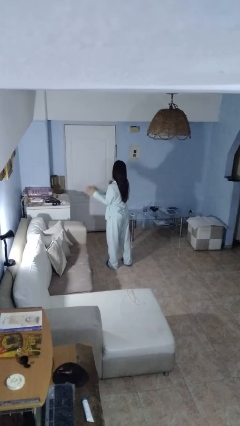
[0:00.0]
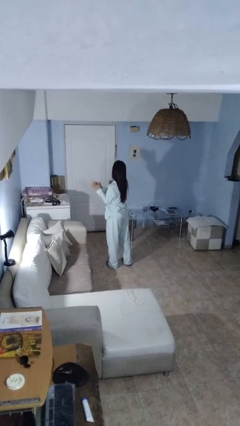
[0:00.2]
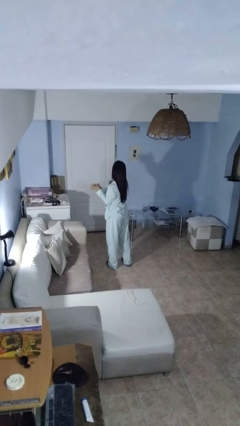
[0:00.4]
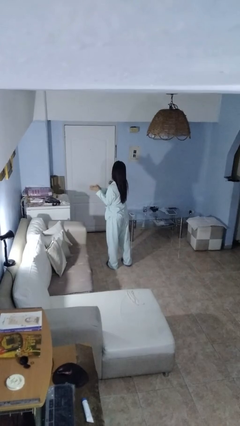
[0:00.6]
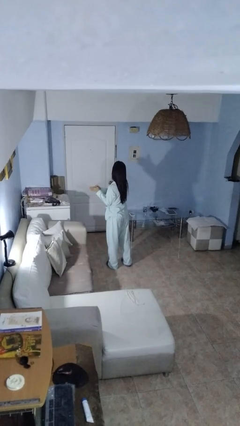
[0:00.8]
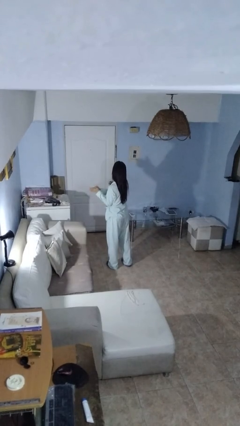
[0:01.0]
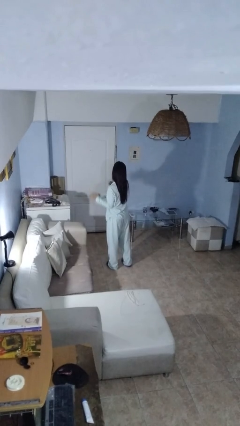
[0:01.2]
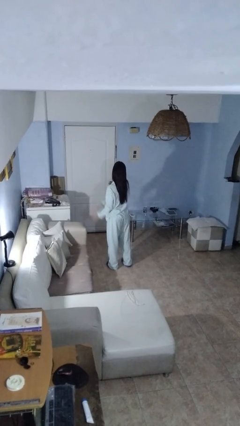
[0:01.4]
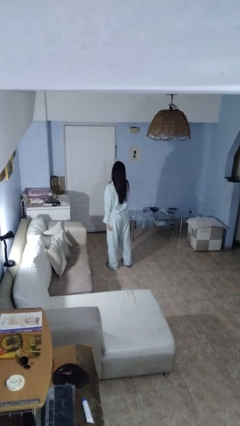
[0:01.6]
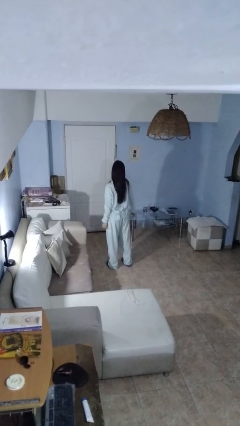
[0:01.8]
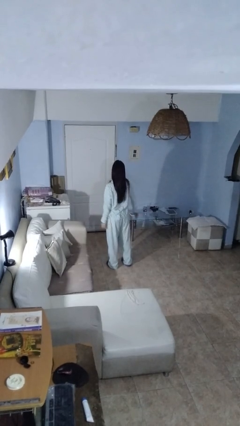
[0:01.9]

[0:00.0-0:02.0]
person claps hands

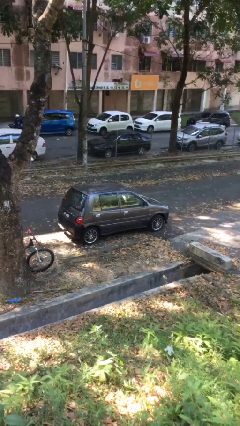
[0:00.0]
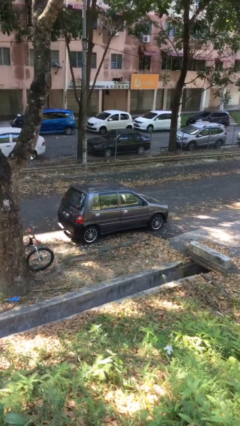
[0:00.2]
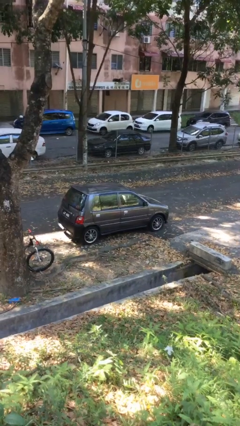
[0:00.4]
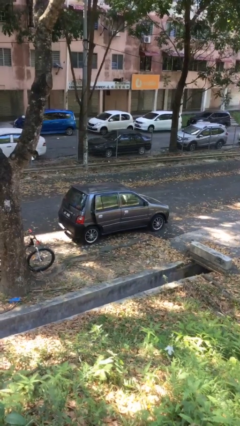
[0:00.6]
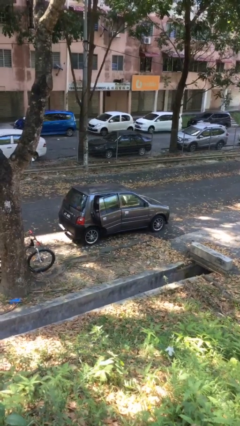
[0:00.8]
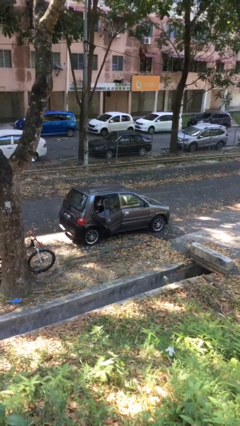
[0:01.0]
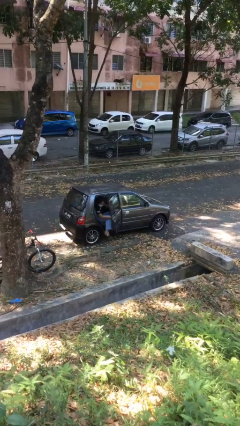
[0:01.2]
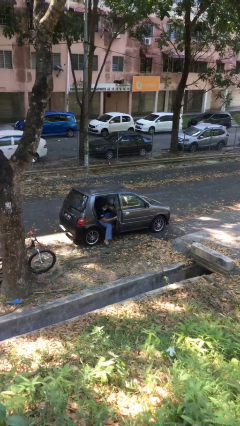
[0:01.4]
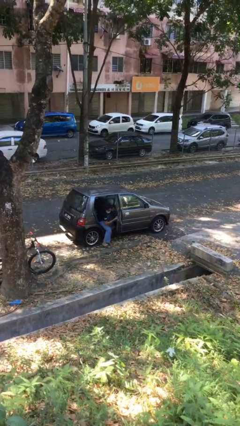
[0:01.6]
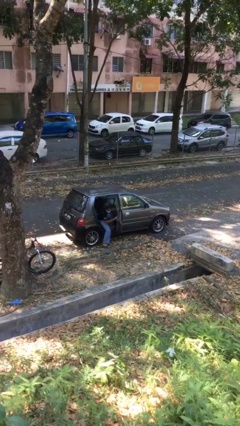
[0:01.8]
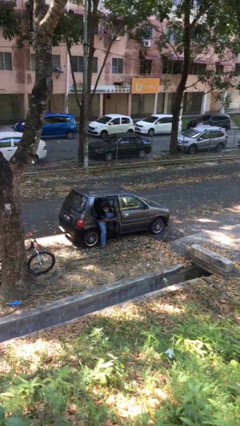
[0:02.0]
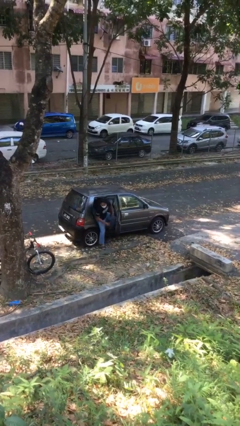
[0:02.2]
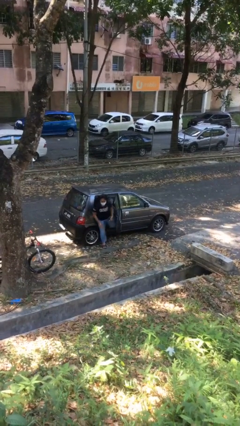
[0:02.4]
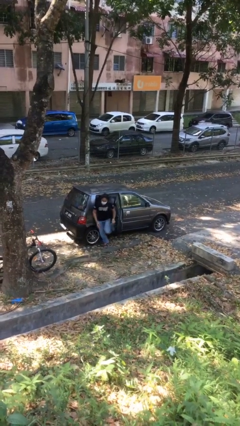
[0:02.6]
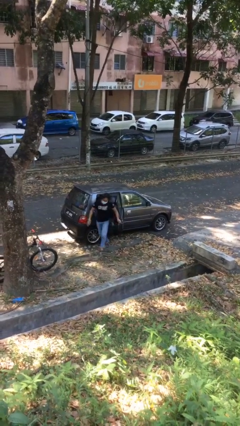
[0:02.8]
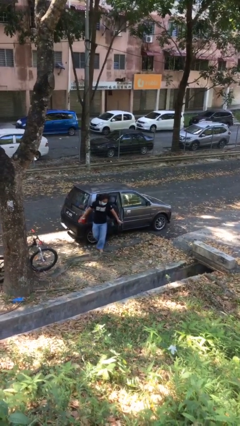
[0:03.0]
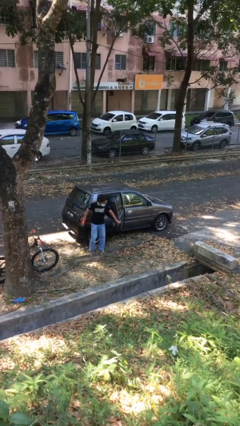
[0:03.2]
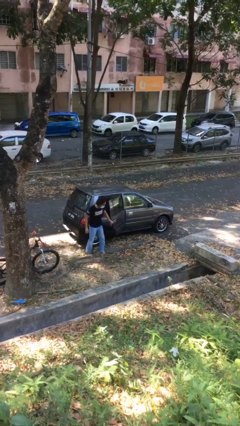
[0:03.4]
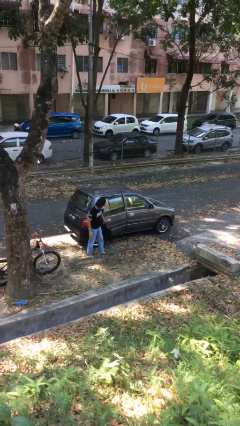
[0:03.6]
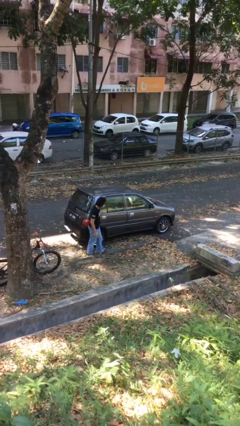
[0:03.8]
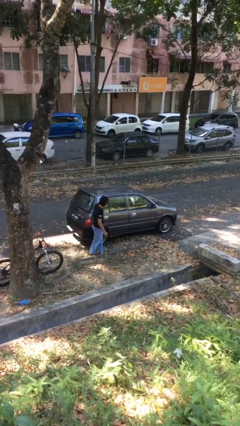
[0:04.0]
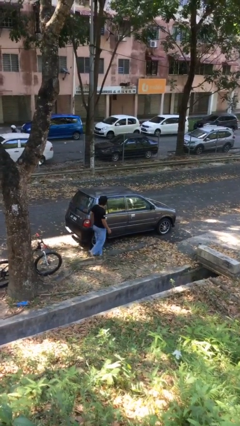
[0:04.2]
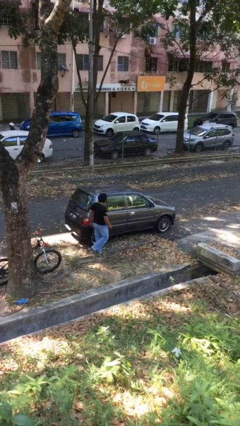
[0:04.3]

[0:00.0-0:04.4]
car drops off person

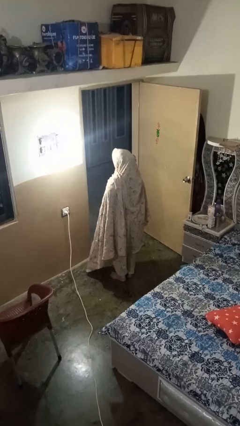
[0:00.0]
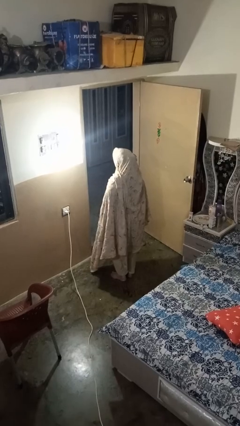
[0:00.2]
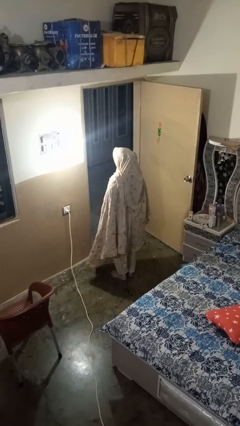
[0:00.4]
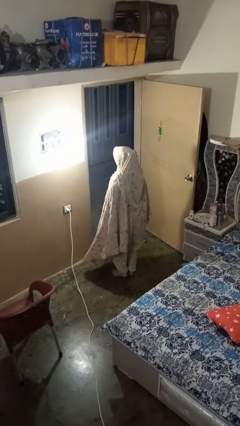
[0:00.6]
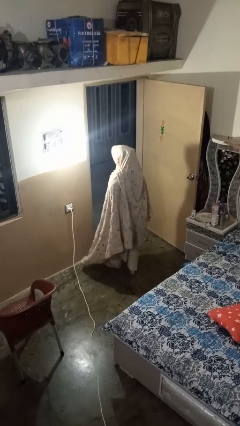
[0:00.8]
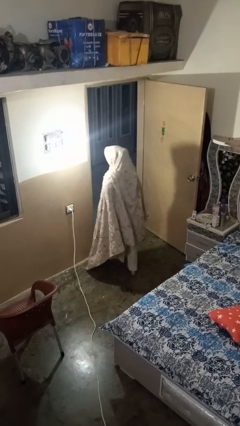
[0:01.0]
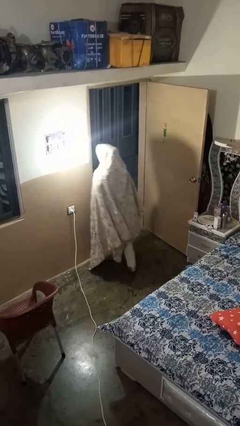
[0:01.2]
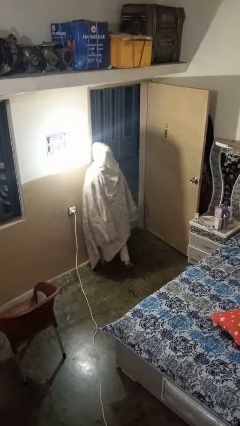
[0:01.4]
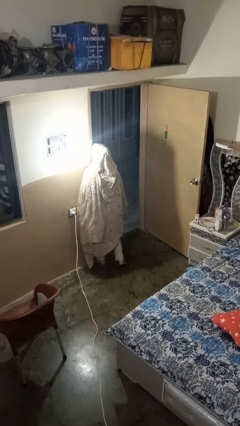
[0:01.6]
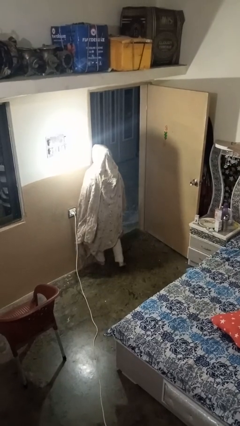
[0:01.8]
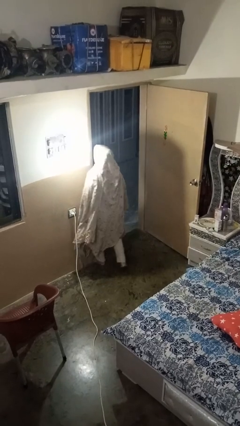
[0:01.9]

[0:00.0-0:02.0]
person bumps into wall

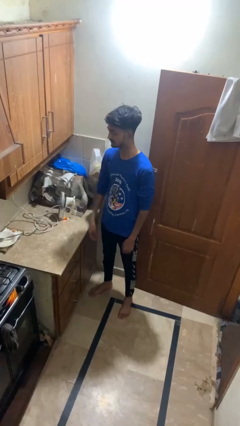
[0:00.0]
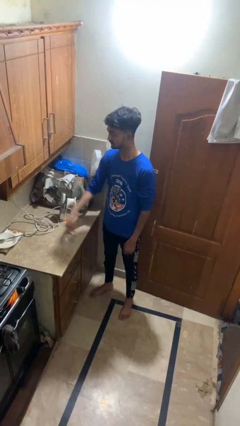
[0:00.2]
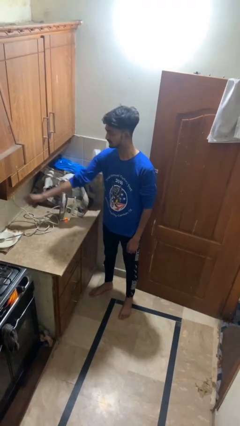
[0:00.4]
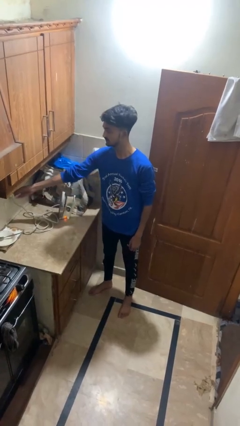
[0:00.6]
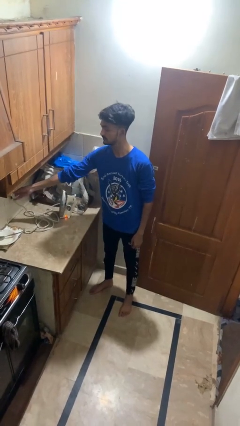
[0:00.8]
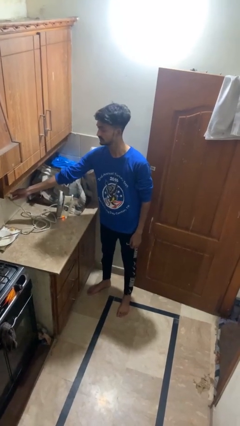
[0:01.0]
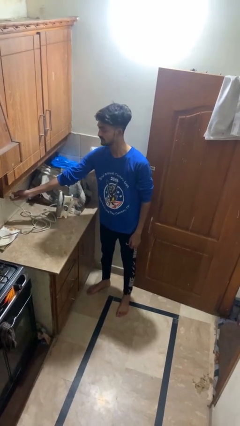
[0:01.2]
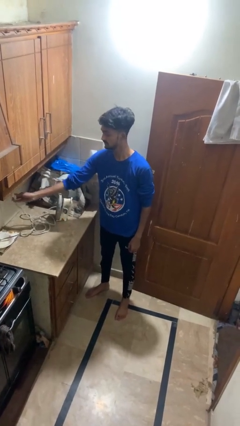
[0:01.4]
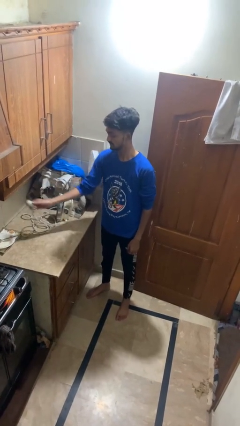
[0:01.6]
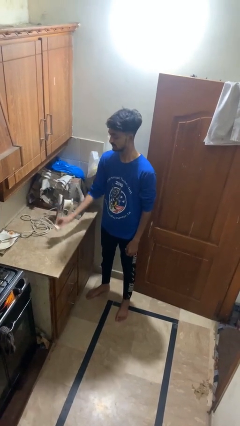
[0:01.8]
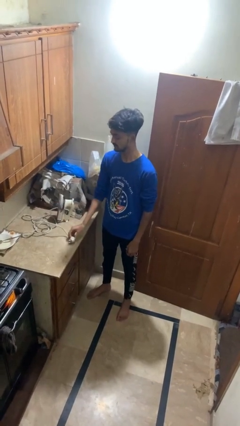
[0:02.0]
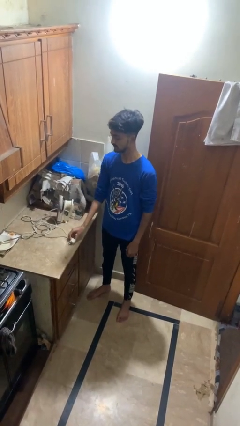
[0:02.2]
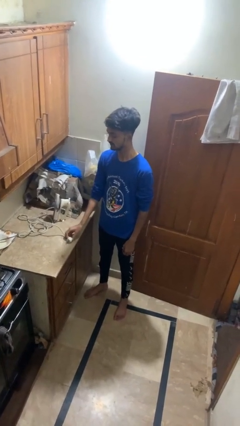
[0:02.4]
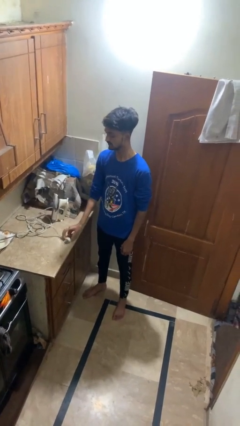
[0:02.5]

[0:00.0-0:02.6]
person unplugs from electrical socket

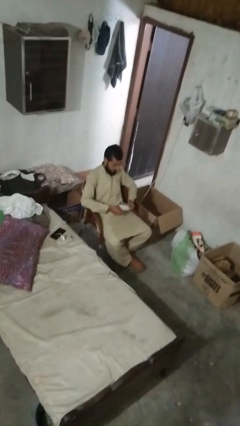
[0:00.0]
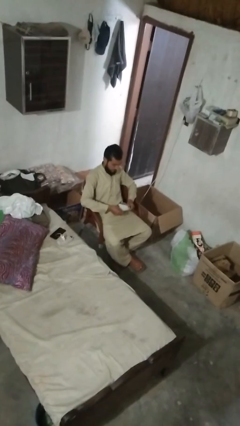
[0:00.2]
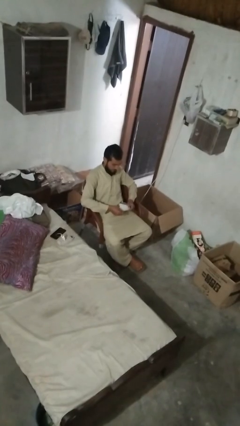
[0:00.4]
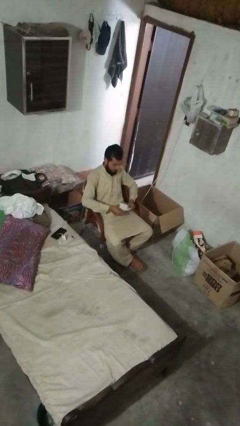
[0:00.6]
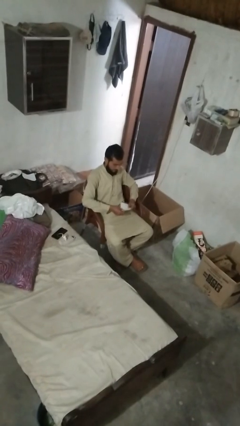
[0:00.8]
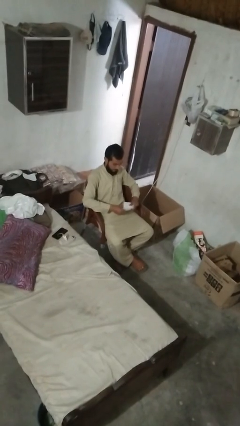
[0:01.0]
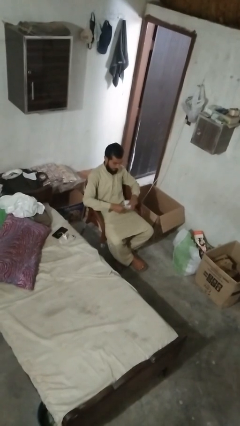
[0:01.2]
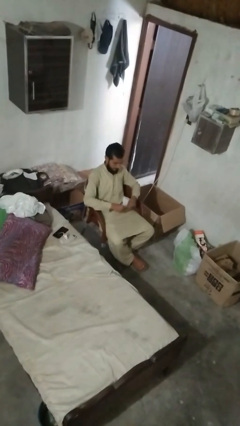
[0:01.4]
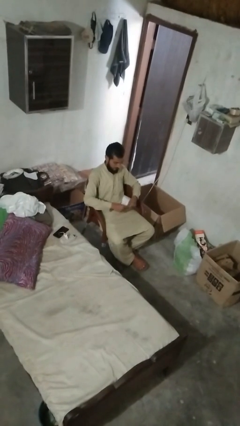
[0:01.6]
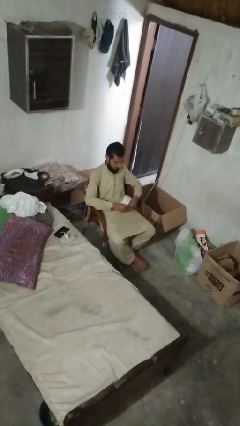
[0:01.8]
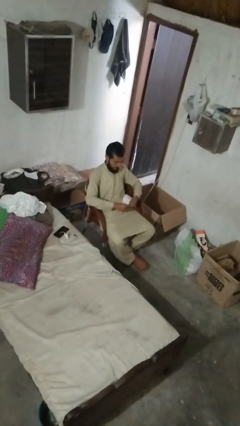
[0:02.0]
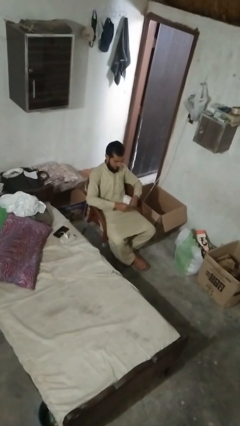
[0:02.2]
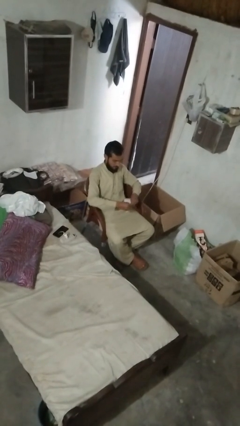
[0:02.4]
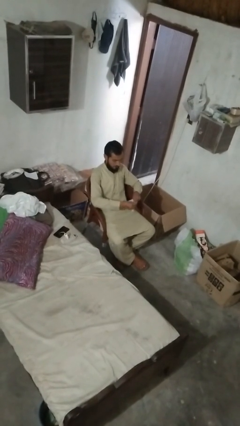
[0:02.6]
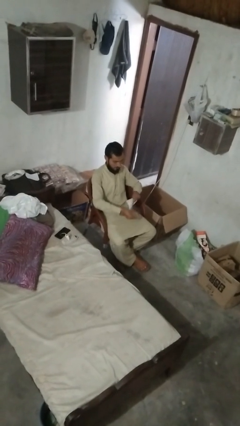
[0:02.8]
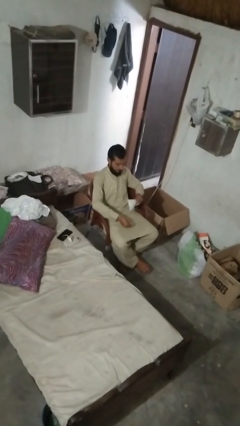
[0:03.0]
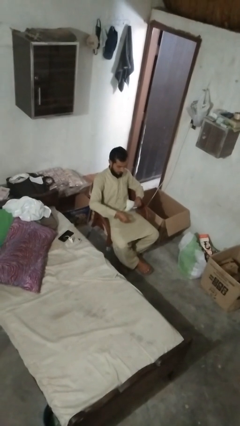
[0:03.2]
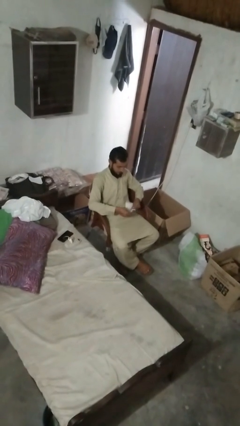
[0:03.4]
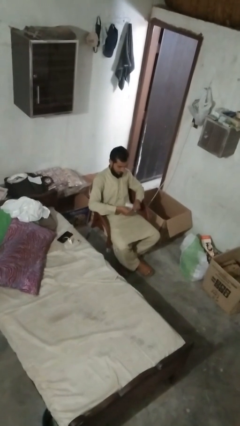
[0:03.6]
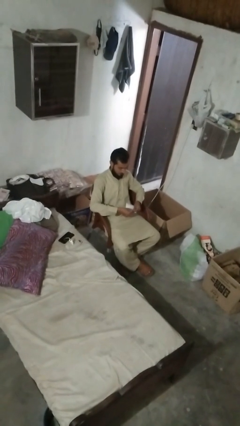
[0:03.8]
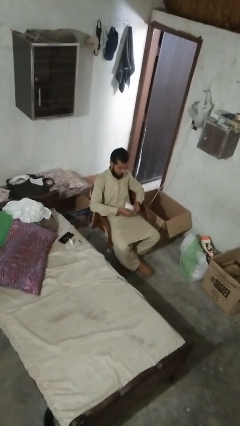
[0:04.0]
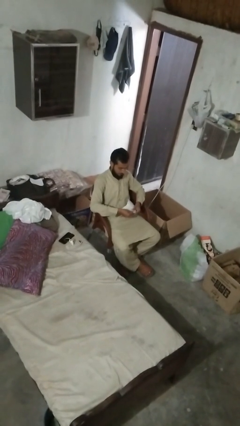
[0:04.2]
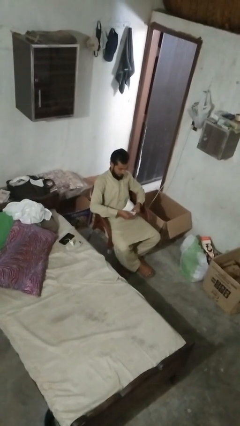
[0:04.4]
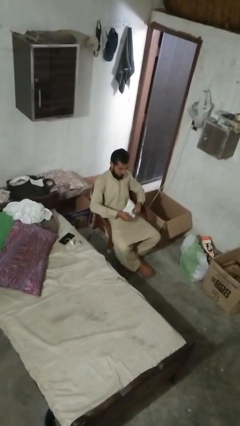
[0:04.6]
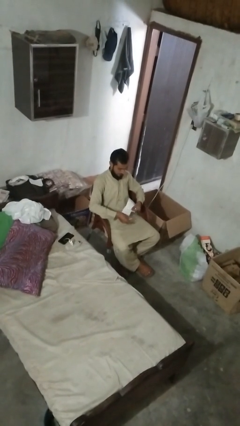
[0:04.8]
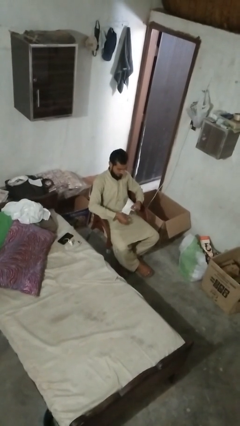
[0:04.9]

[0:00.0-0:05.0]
person tears paper

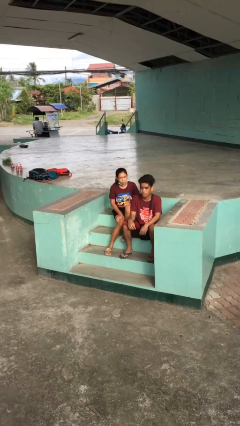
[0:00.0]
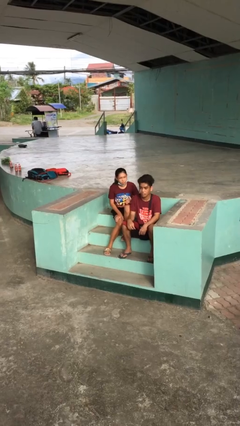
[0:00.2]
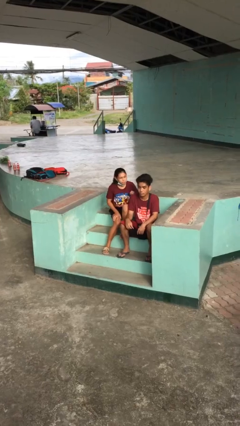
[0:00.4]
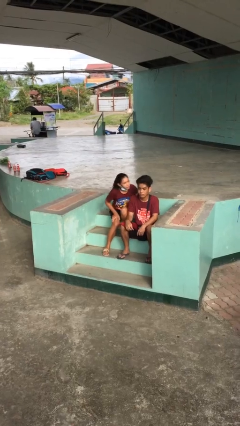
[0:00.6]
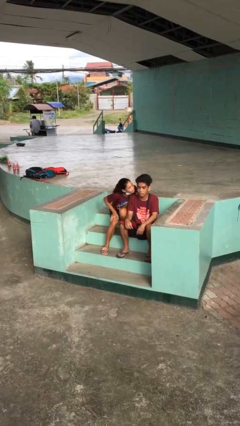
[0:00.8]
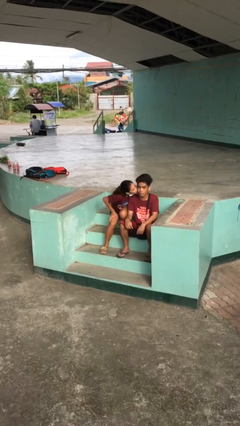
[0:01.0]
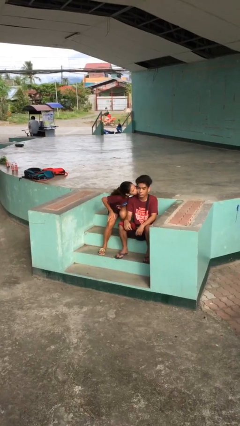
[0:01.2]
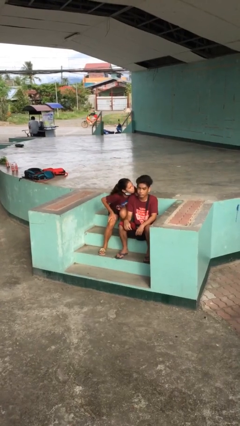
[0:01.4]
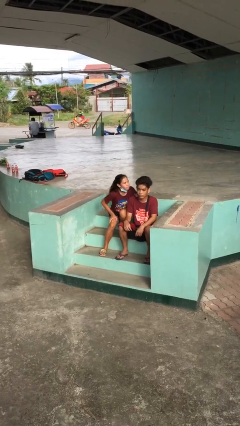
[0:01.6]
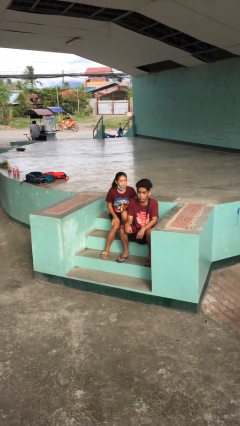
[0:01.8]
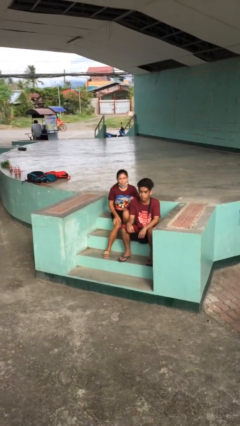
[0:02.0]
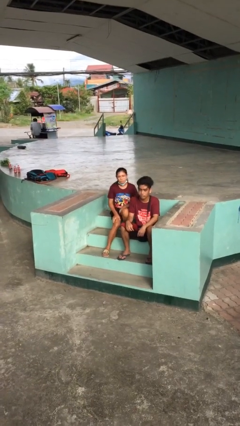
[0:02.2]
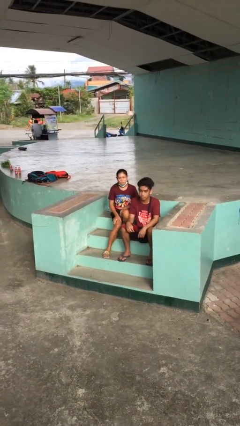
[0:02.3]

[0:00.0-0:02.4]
person kisses cheek of person
